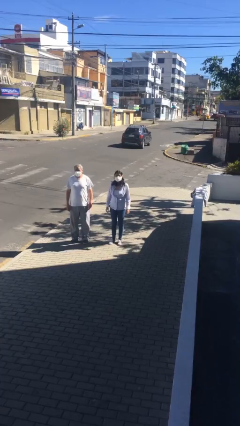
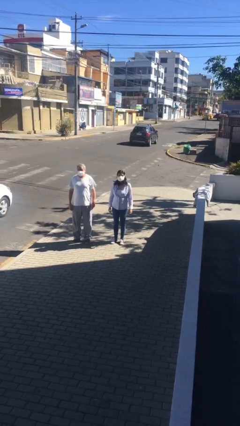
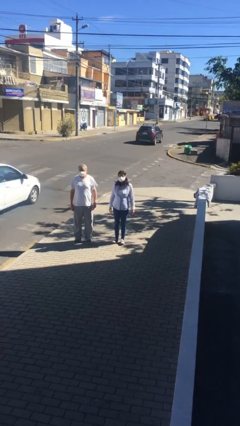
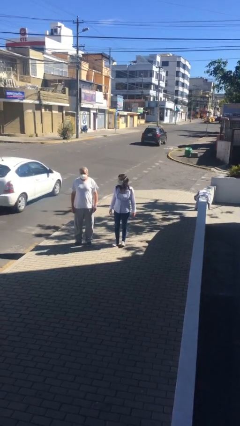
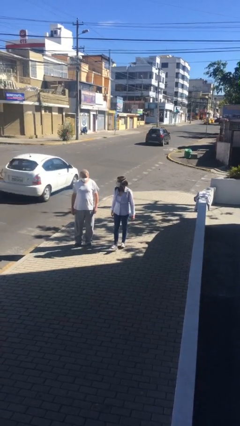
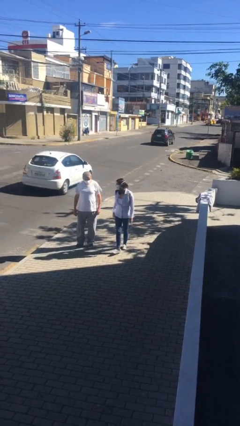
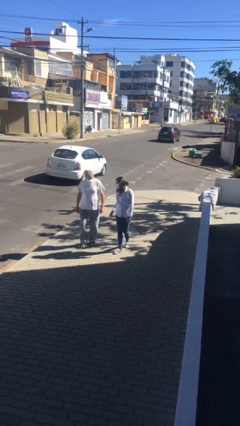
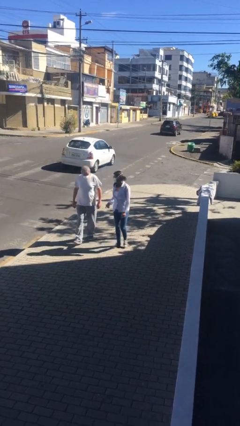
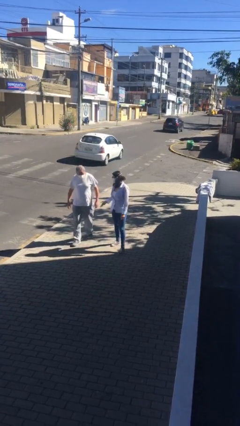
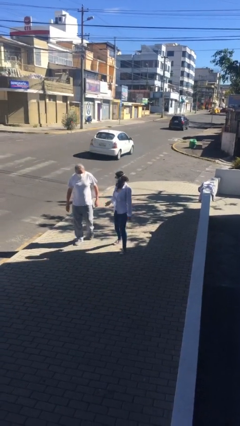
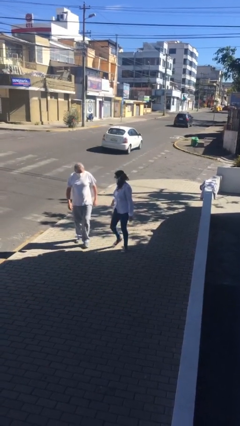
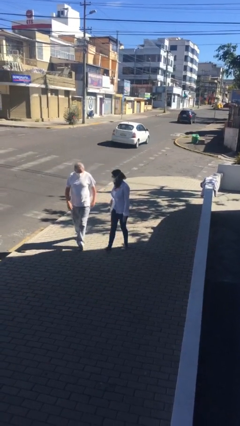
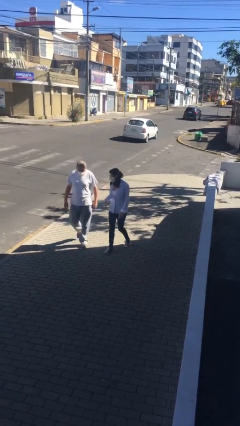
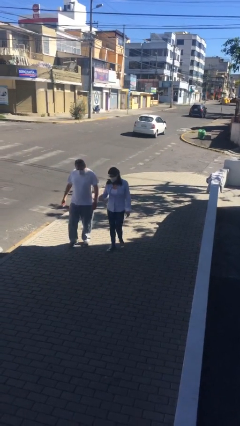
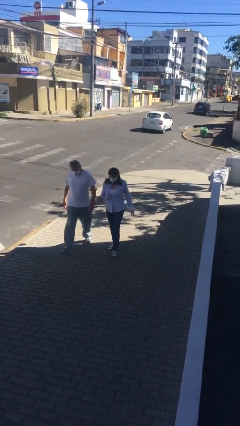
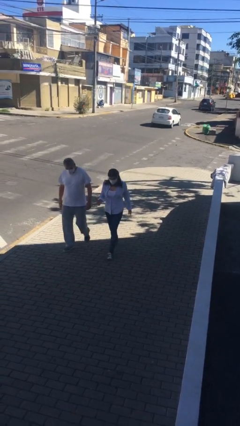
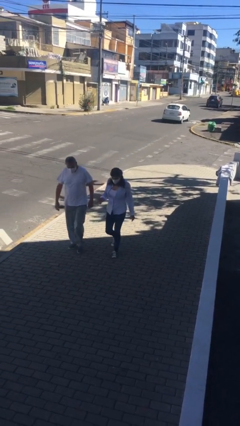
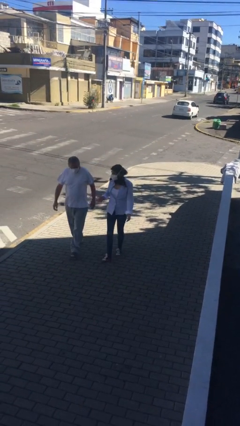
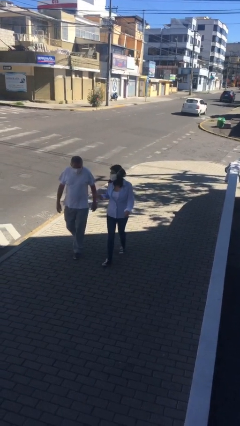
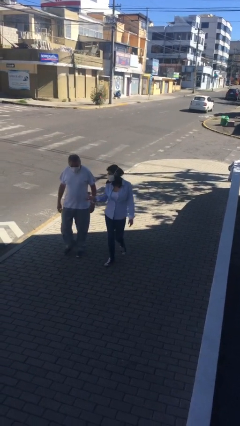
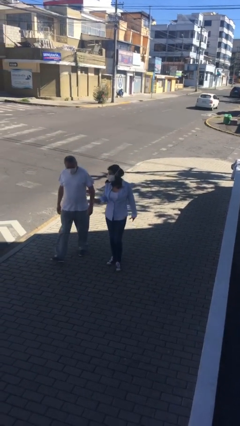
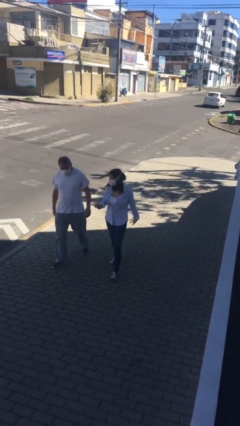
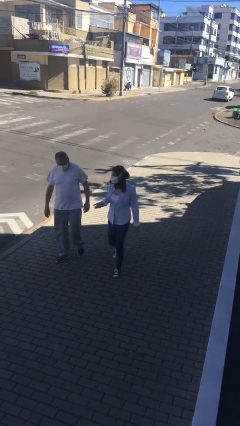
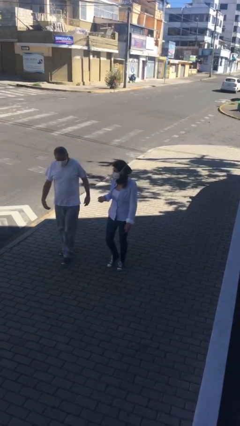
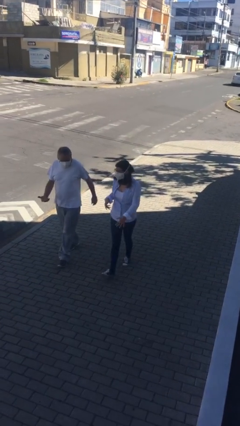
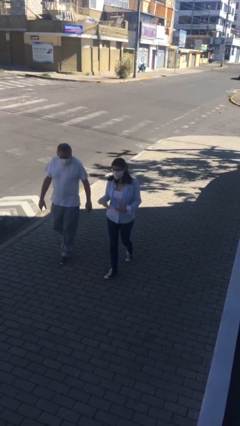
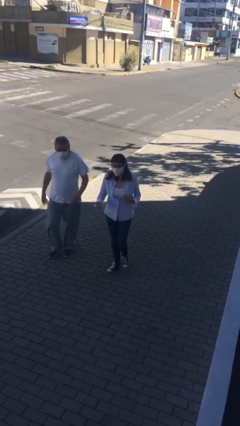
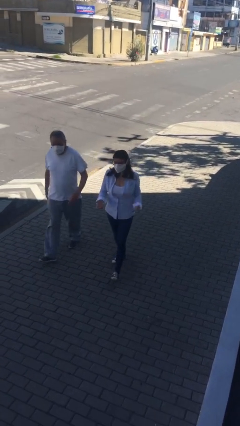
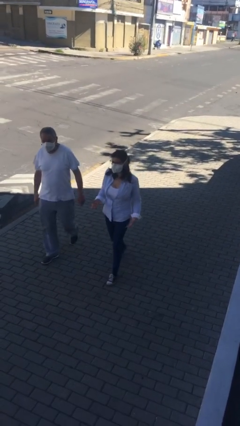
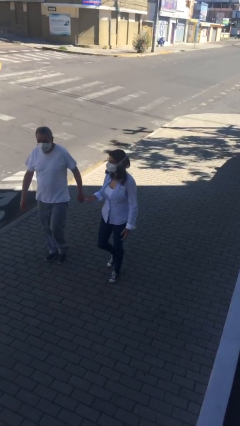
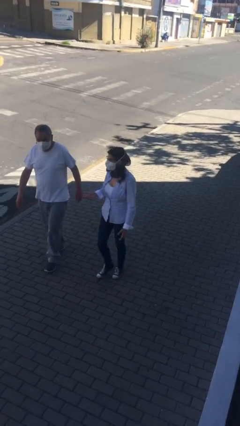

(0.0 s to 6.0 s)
person talks to person

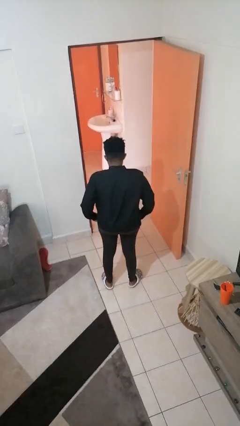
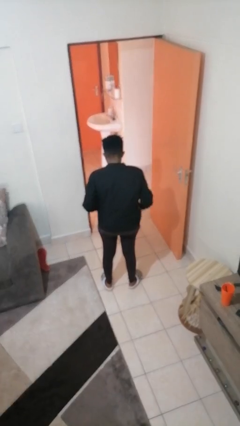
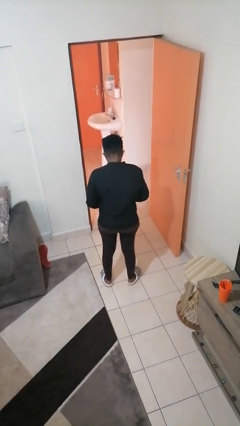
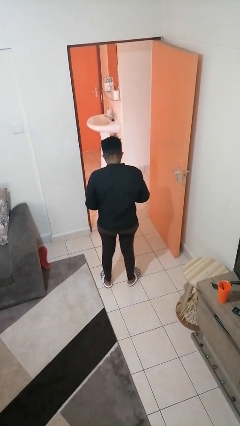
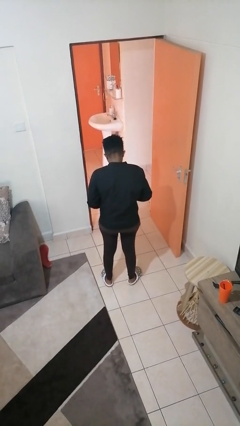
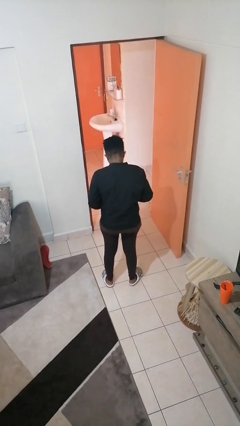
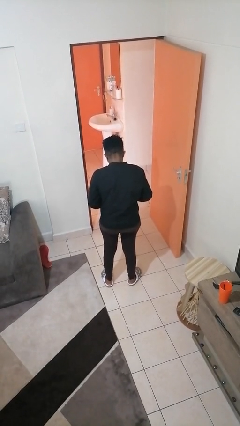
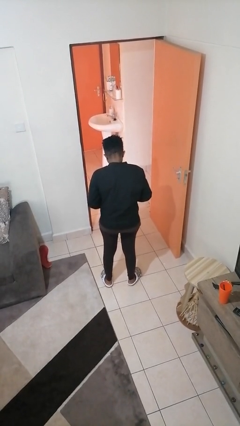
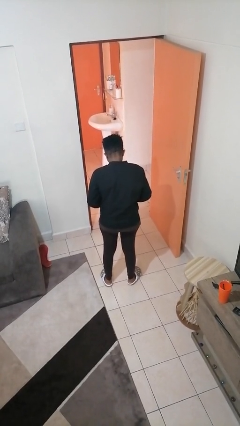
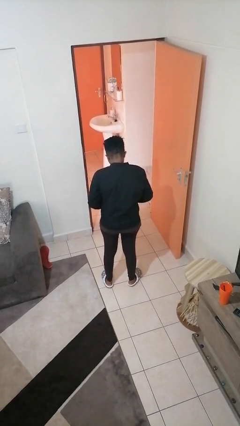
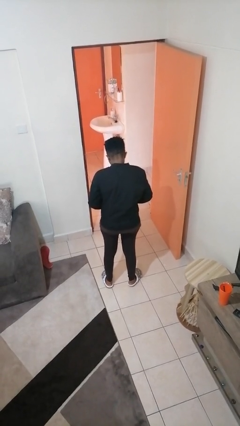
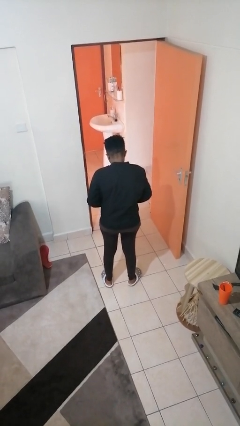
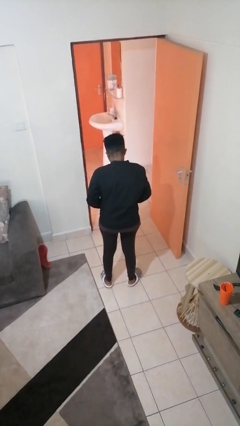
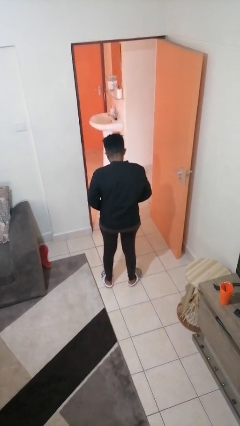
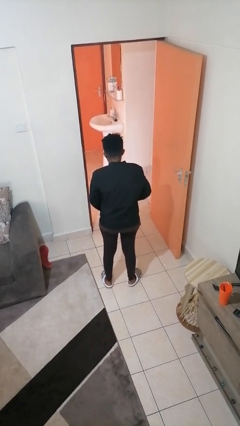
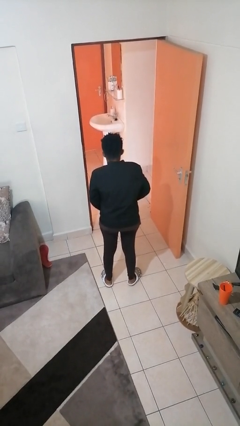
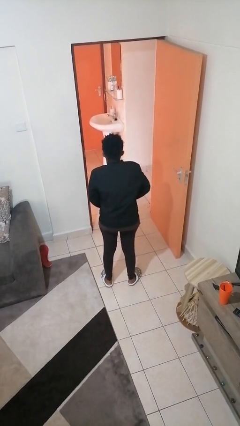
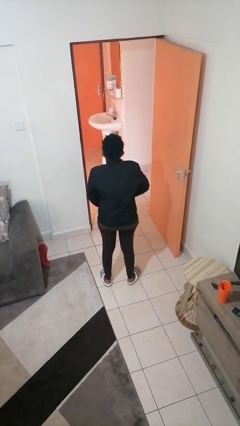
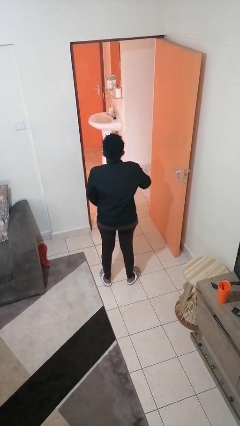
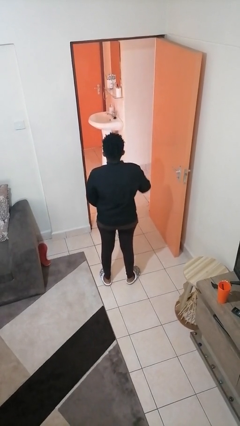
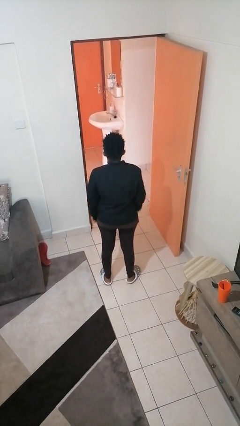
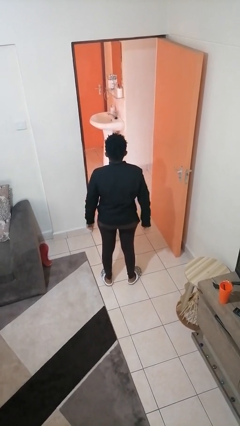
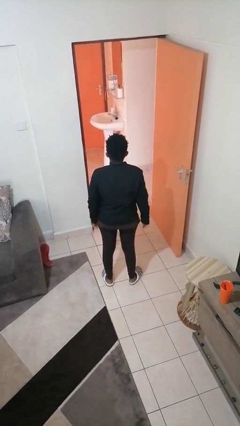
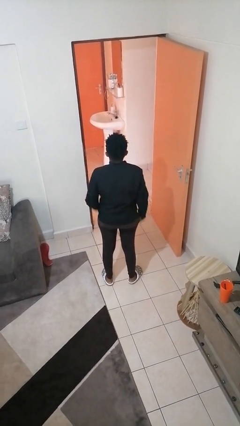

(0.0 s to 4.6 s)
person zips up jacket

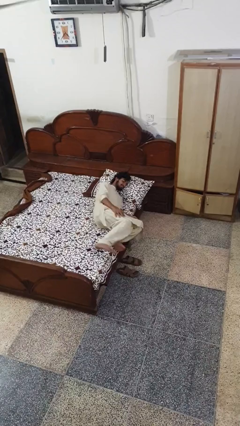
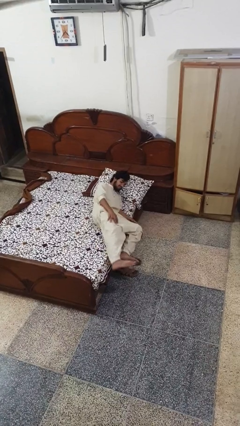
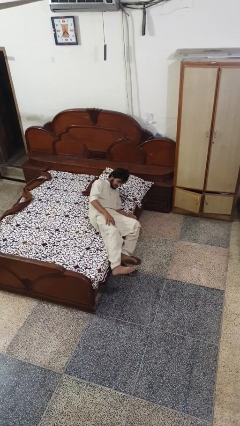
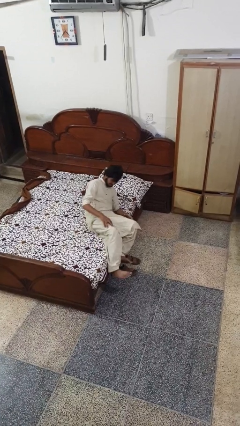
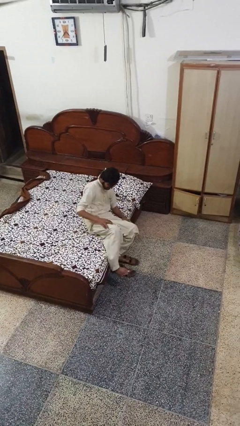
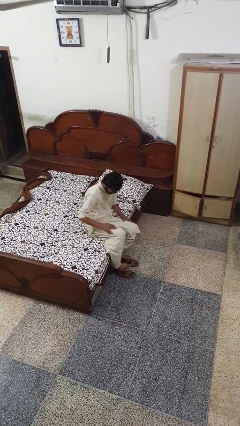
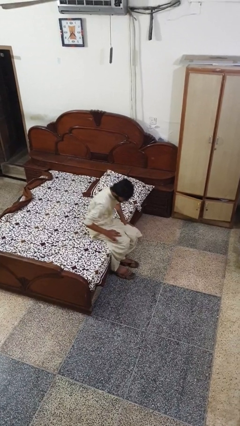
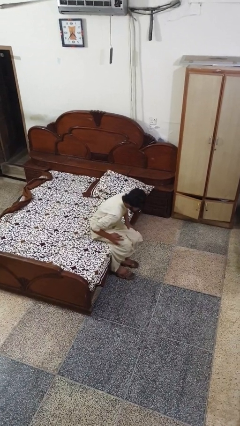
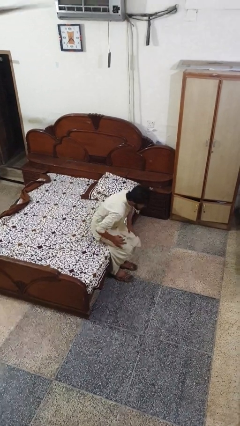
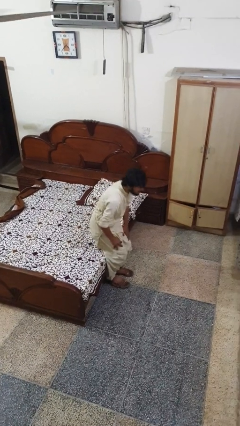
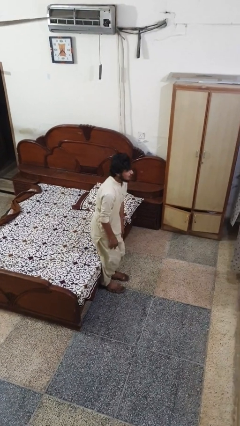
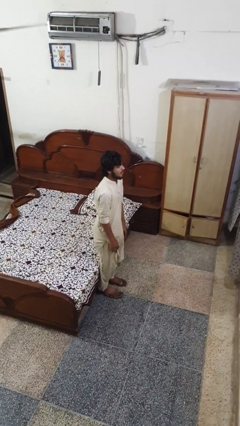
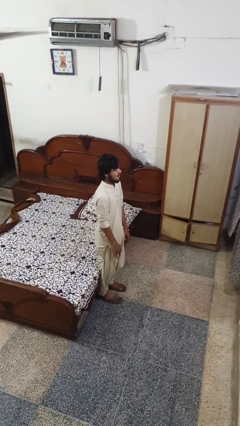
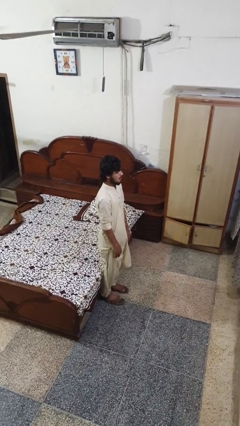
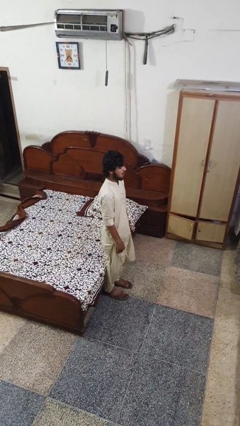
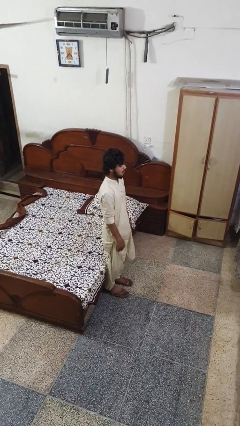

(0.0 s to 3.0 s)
person stands up

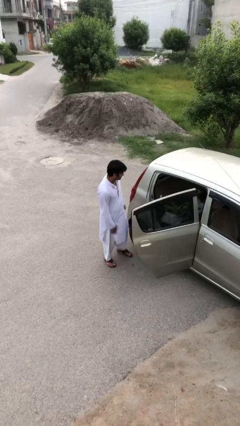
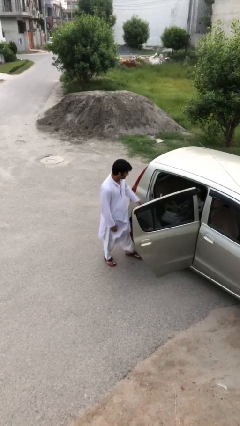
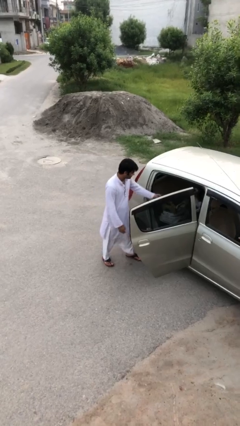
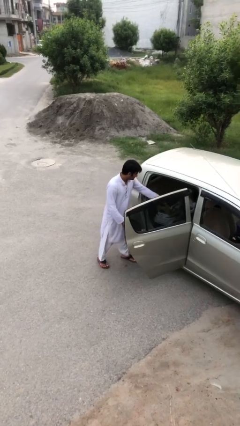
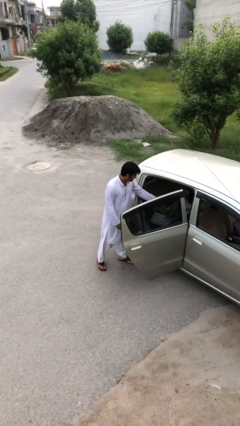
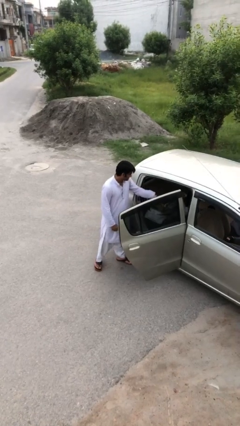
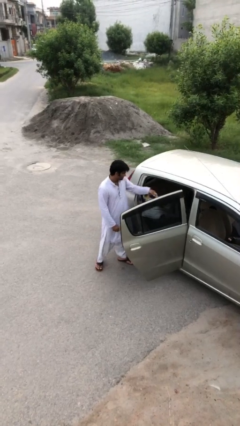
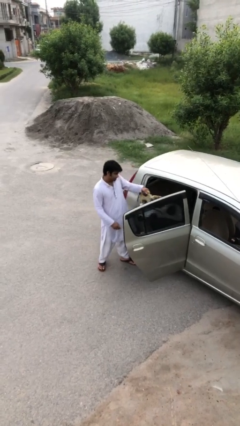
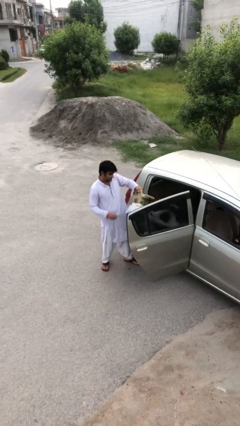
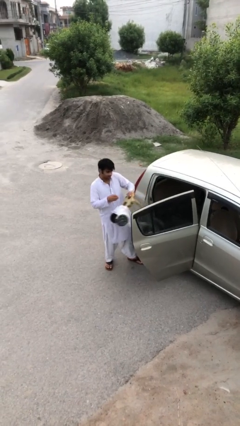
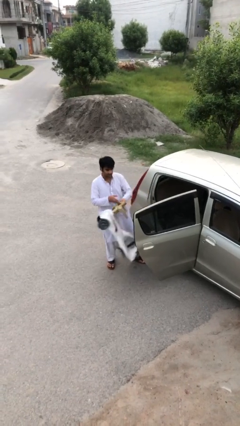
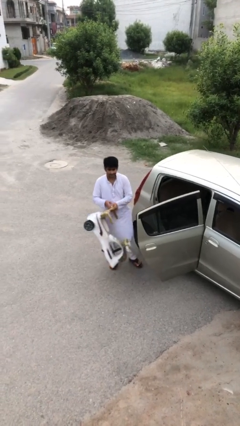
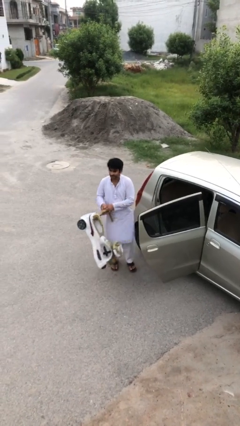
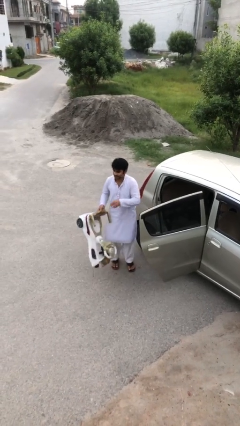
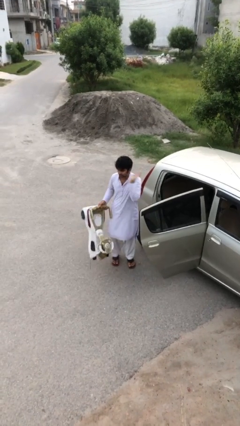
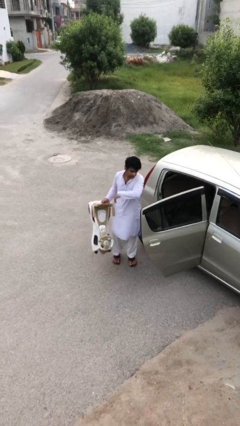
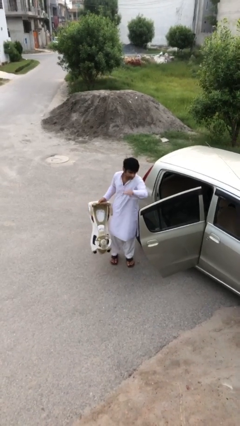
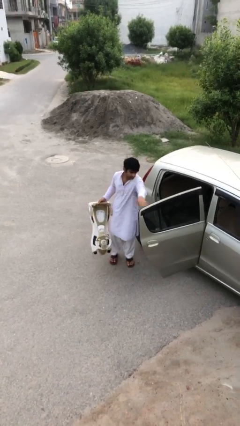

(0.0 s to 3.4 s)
person unloads car

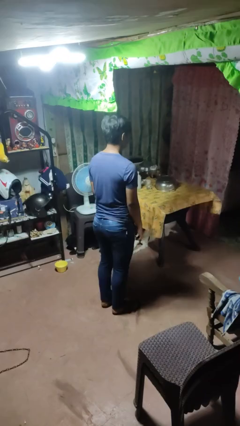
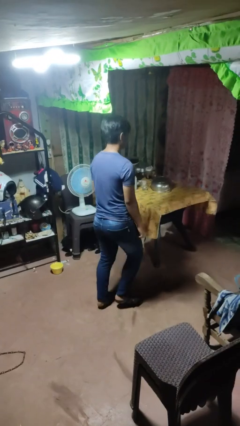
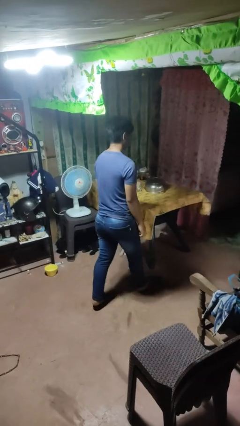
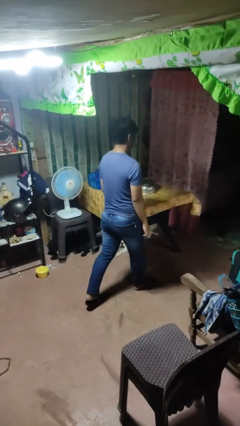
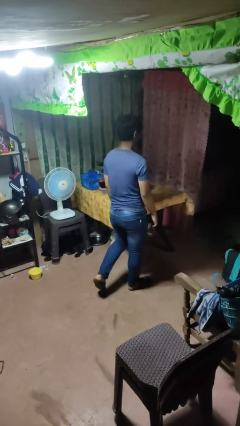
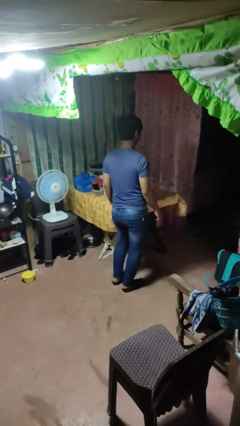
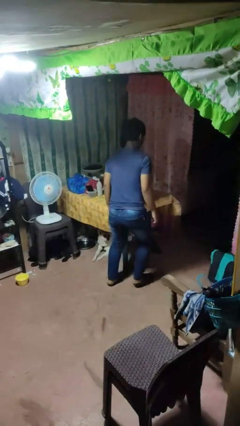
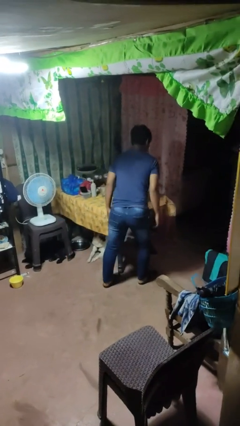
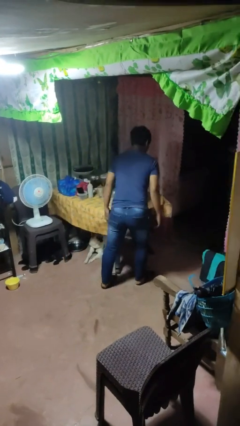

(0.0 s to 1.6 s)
person bumps into table
